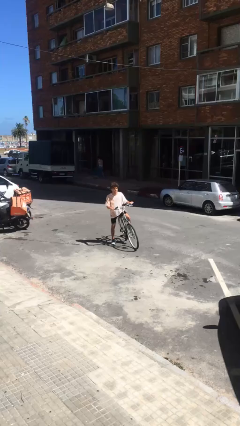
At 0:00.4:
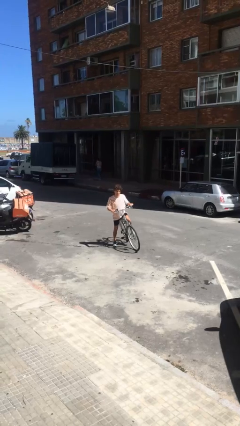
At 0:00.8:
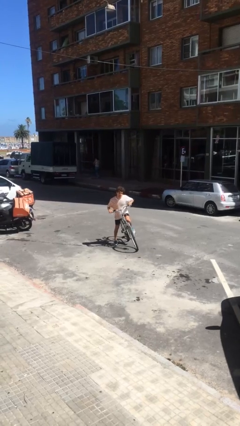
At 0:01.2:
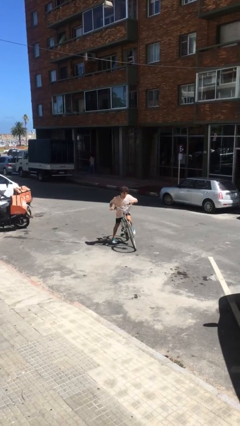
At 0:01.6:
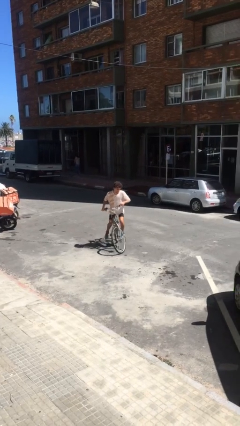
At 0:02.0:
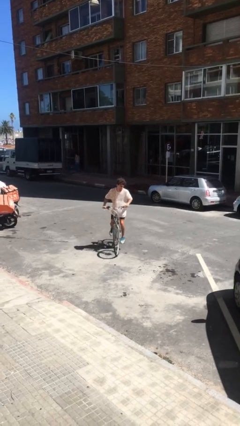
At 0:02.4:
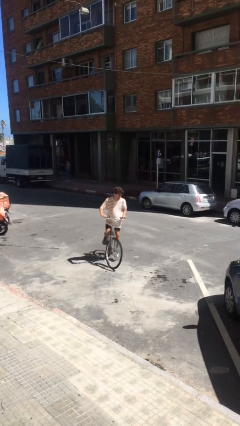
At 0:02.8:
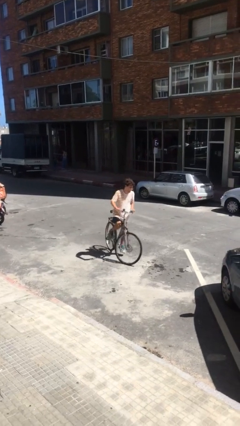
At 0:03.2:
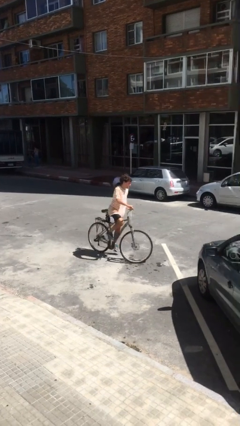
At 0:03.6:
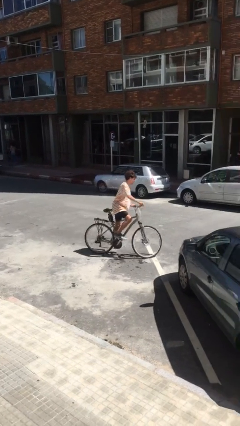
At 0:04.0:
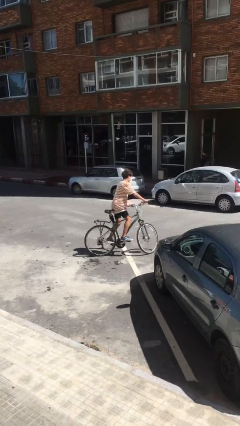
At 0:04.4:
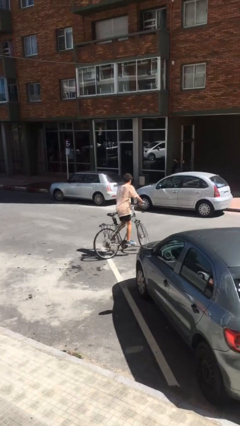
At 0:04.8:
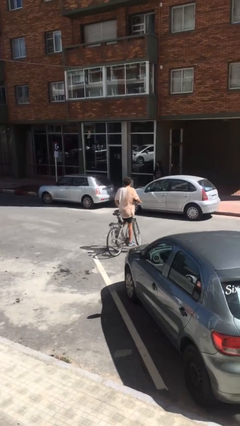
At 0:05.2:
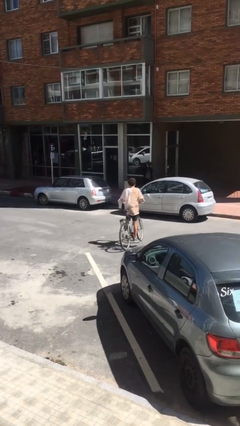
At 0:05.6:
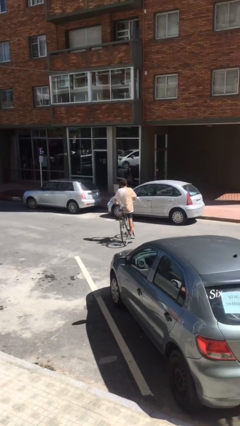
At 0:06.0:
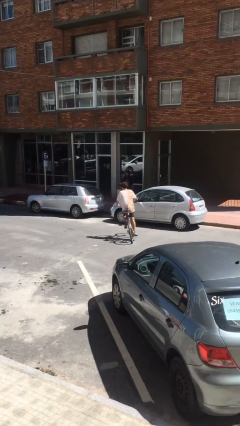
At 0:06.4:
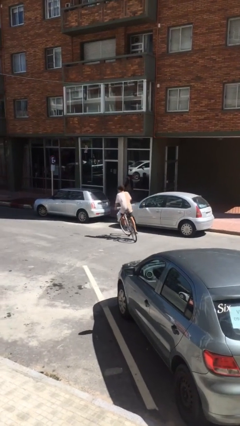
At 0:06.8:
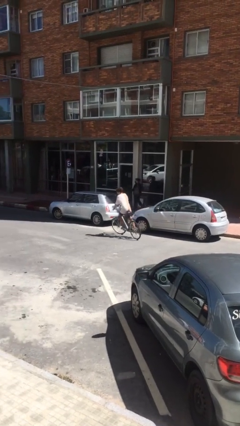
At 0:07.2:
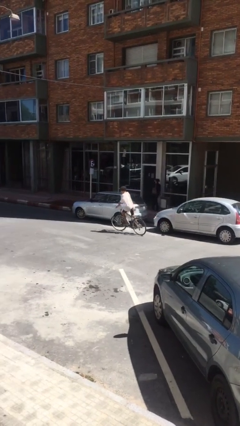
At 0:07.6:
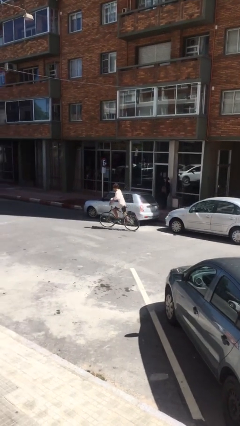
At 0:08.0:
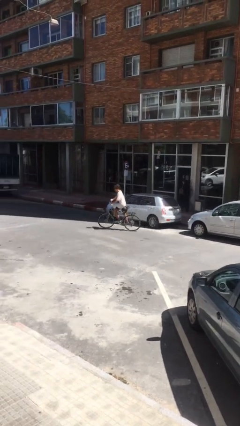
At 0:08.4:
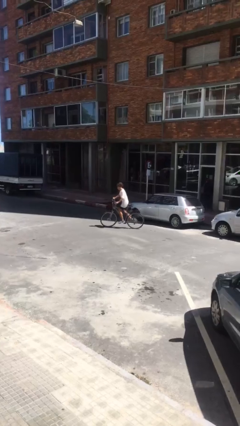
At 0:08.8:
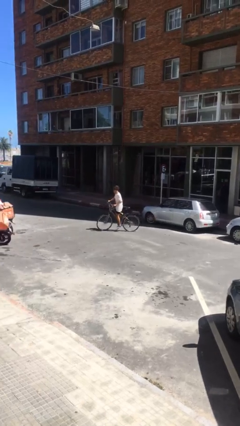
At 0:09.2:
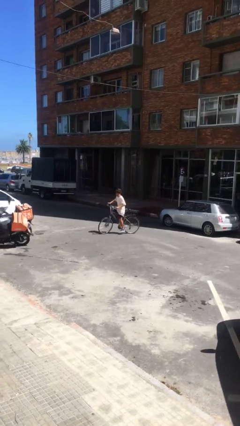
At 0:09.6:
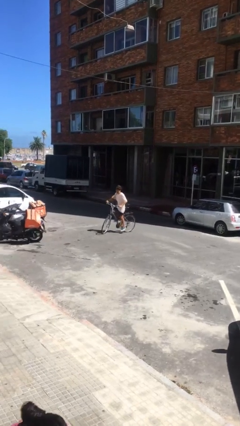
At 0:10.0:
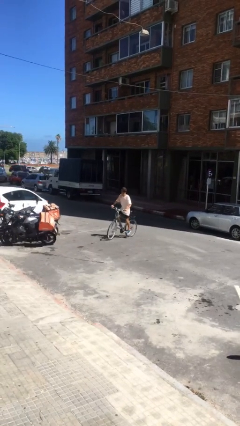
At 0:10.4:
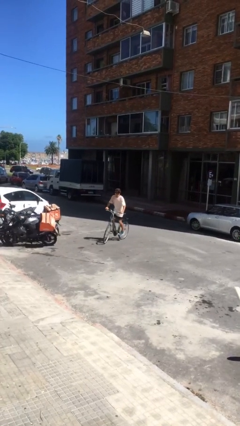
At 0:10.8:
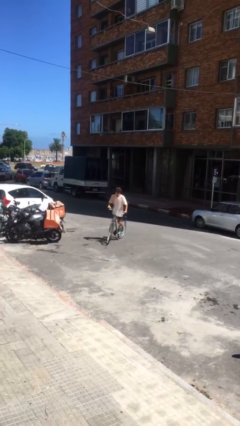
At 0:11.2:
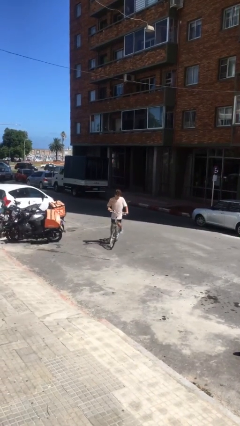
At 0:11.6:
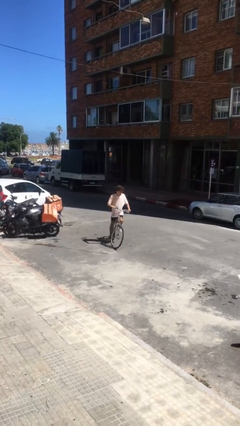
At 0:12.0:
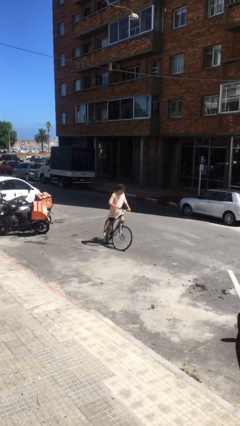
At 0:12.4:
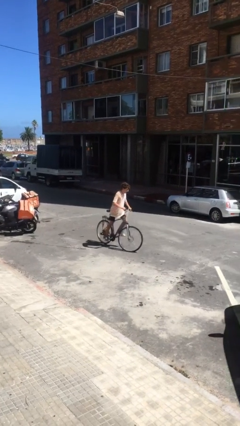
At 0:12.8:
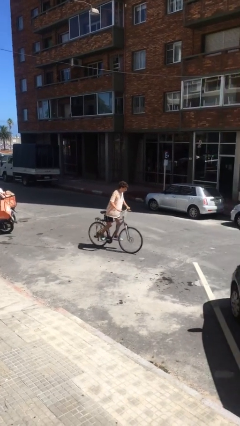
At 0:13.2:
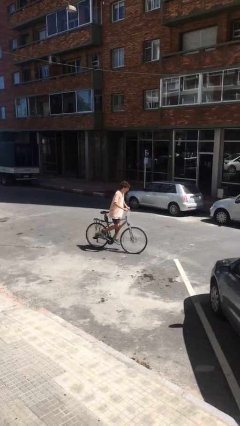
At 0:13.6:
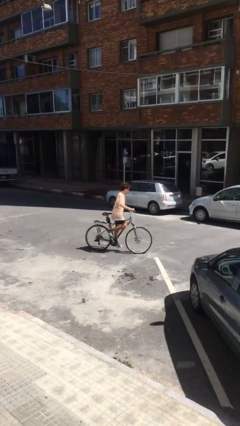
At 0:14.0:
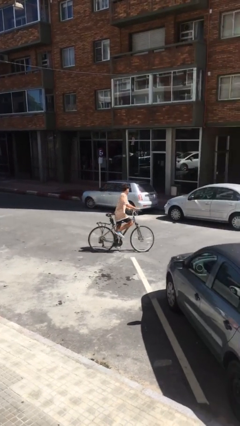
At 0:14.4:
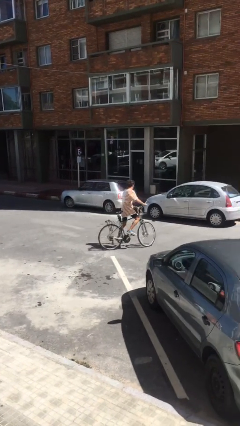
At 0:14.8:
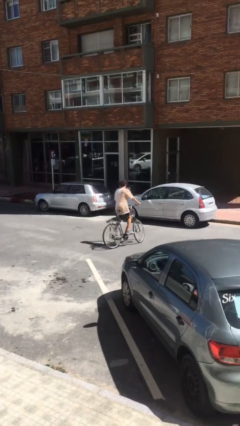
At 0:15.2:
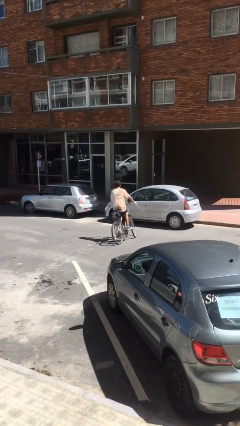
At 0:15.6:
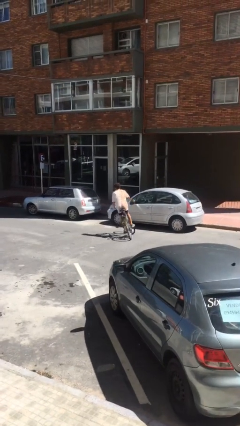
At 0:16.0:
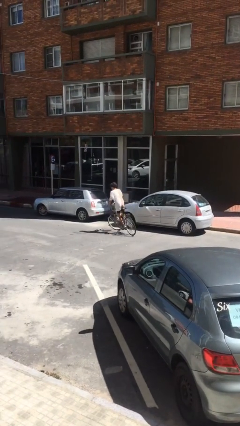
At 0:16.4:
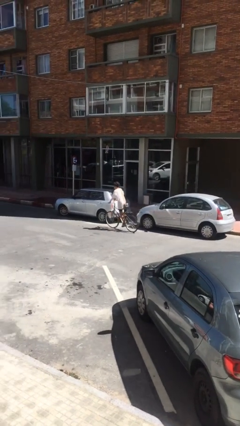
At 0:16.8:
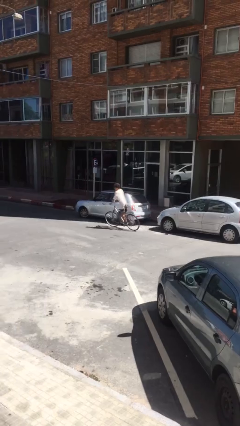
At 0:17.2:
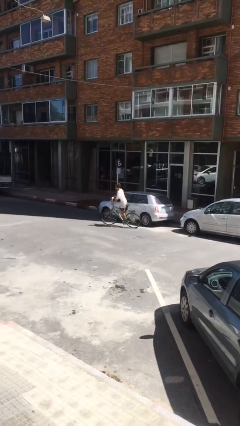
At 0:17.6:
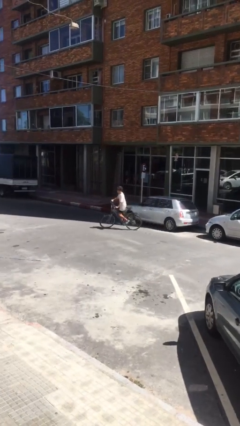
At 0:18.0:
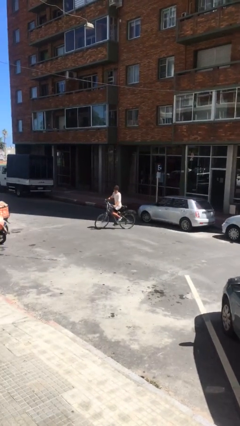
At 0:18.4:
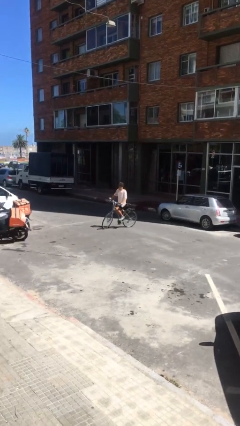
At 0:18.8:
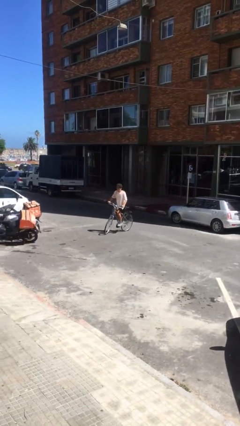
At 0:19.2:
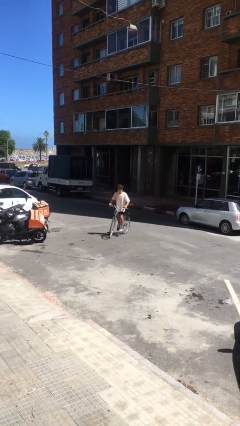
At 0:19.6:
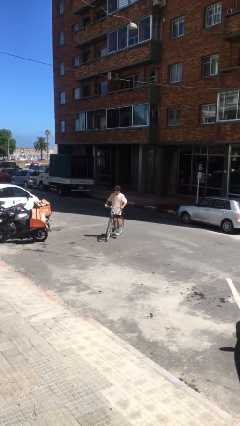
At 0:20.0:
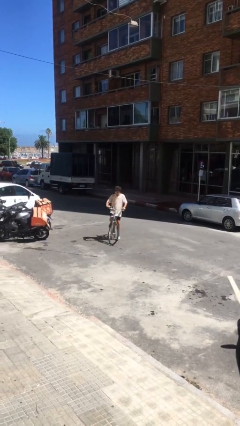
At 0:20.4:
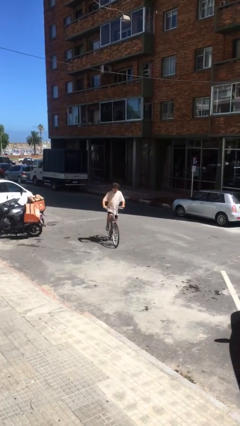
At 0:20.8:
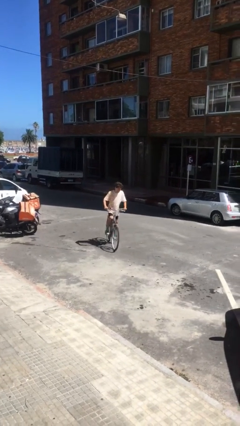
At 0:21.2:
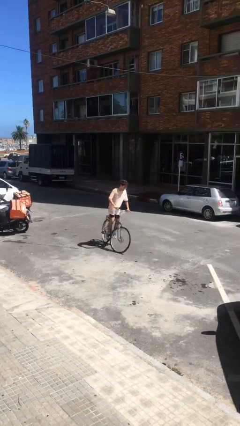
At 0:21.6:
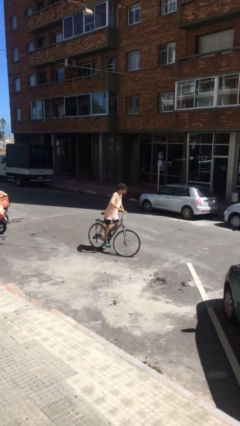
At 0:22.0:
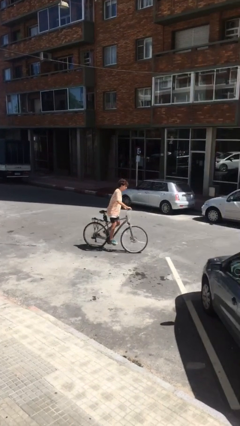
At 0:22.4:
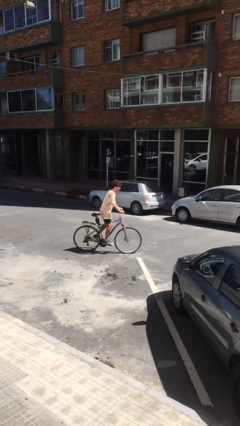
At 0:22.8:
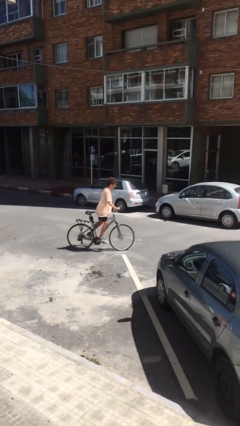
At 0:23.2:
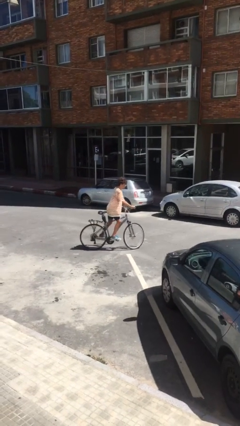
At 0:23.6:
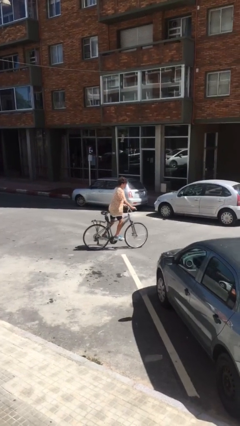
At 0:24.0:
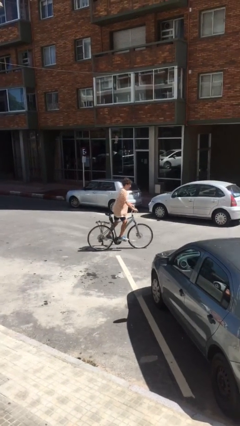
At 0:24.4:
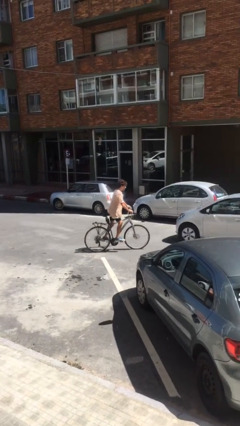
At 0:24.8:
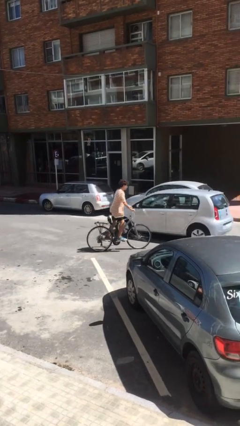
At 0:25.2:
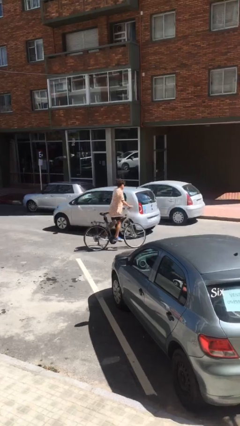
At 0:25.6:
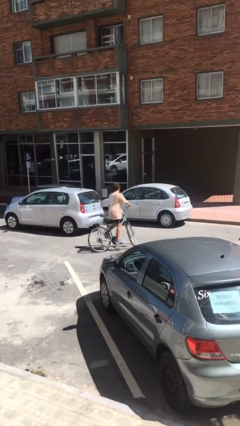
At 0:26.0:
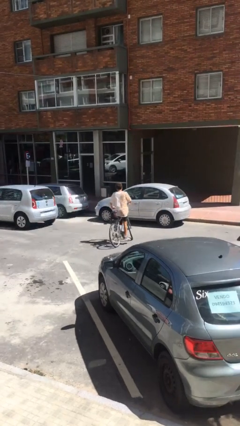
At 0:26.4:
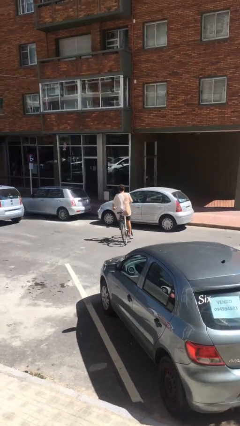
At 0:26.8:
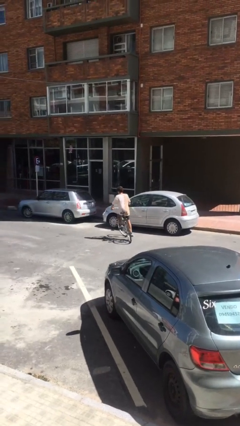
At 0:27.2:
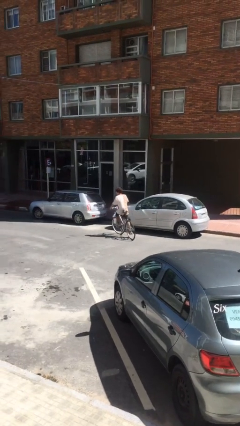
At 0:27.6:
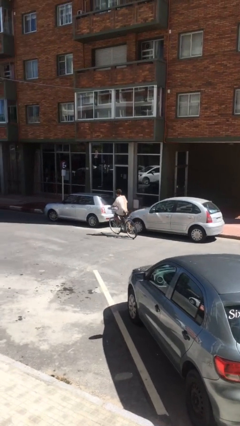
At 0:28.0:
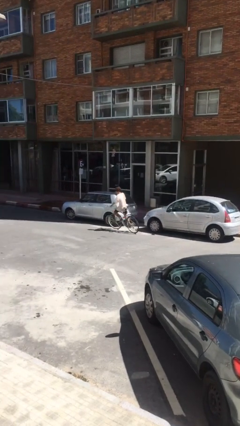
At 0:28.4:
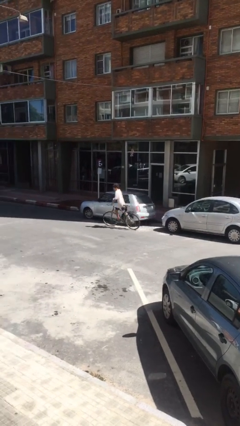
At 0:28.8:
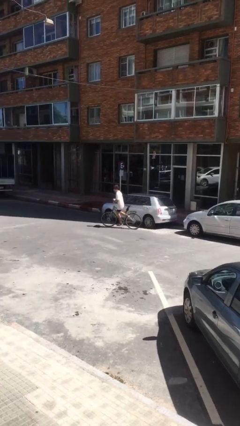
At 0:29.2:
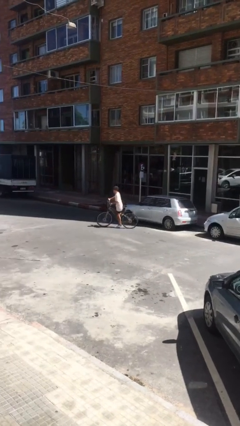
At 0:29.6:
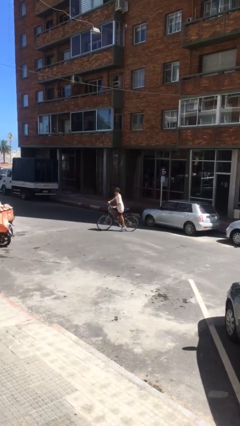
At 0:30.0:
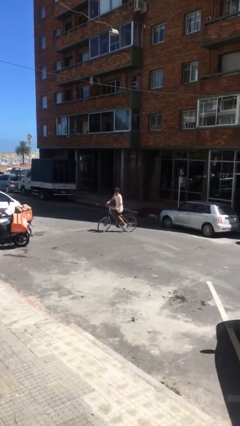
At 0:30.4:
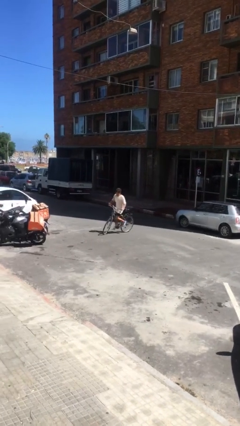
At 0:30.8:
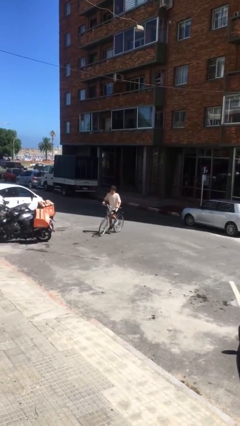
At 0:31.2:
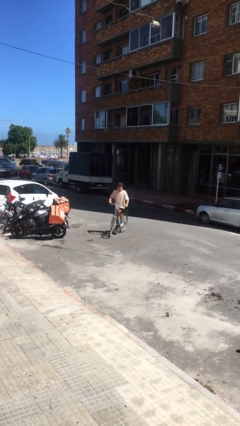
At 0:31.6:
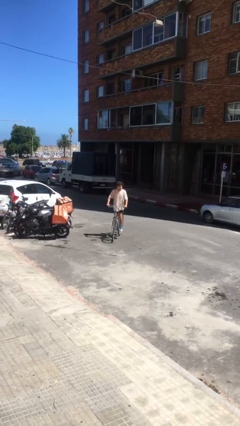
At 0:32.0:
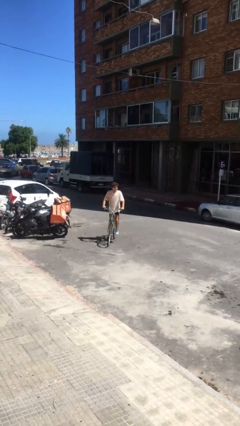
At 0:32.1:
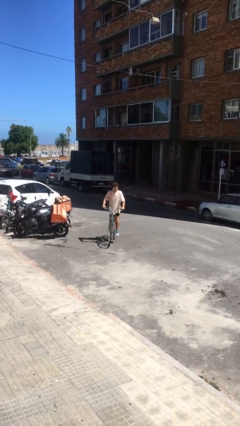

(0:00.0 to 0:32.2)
person rides bicycle

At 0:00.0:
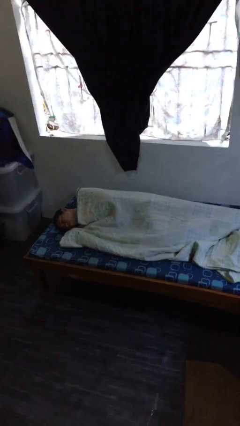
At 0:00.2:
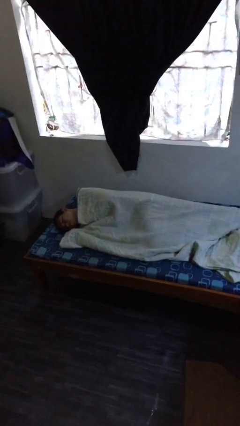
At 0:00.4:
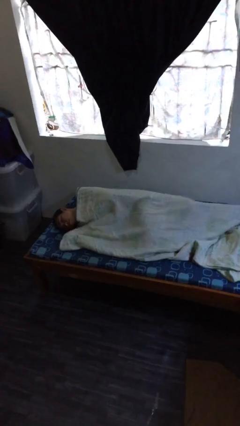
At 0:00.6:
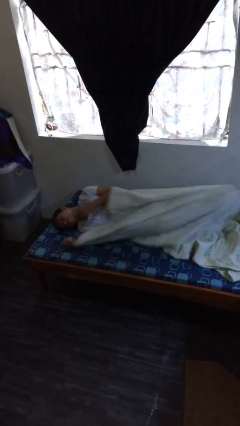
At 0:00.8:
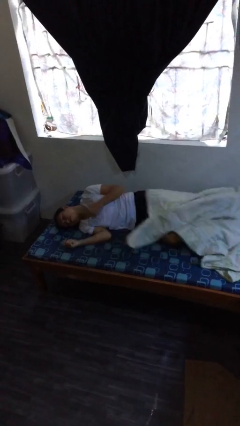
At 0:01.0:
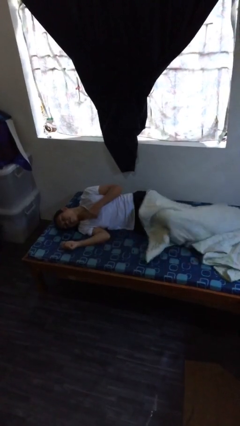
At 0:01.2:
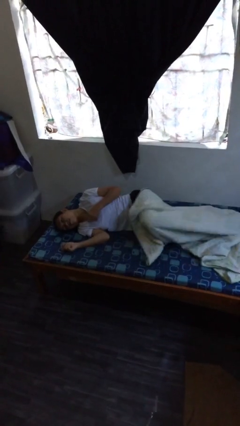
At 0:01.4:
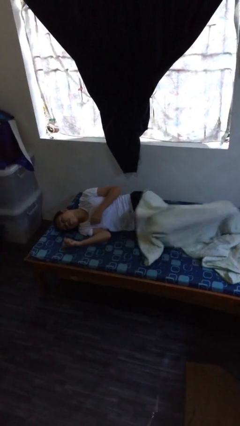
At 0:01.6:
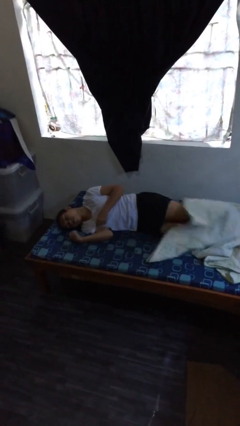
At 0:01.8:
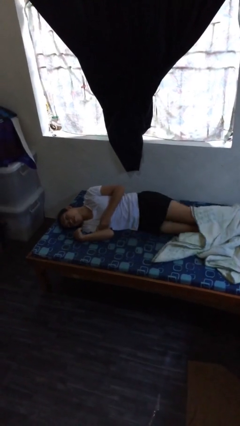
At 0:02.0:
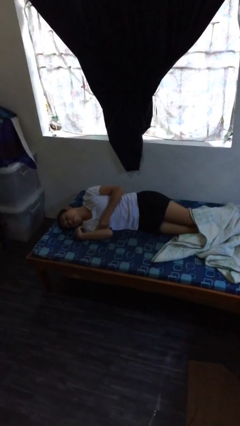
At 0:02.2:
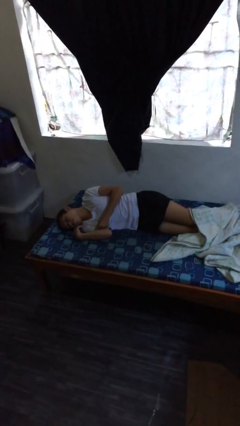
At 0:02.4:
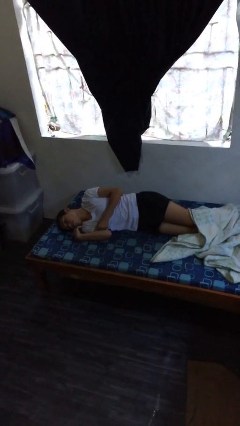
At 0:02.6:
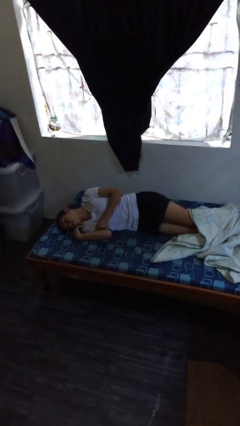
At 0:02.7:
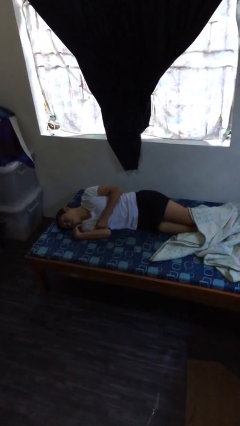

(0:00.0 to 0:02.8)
person uncovers with bedsheets
